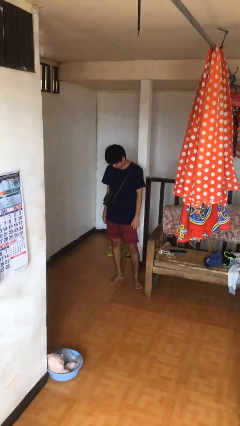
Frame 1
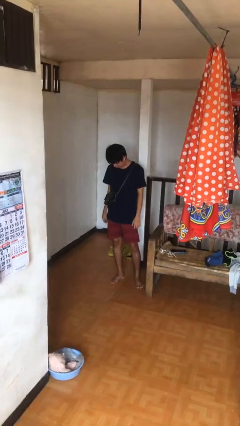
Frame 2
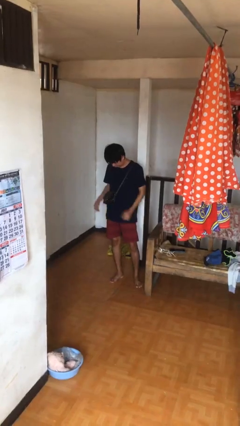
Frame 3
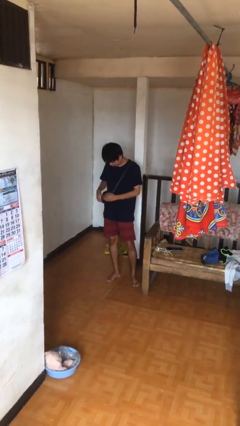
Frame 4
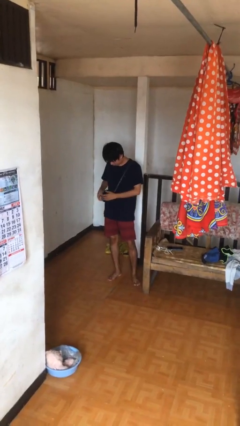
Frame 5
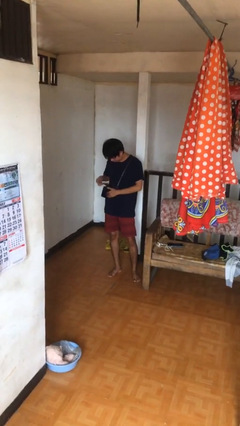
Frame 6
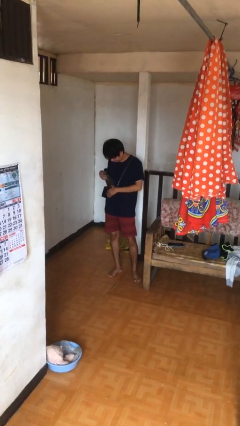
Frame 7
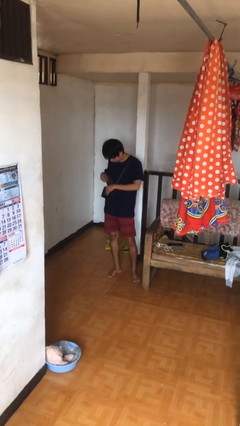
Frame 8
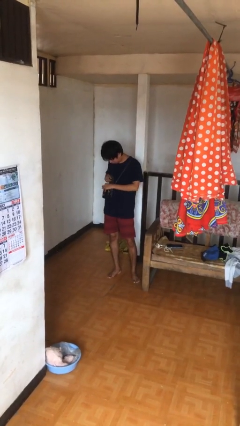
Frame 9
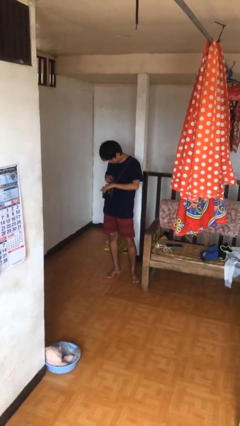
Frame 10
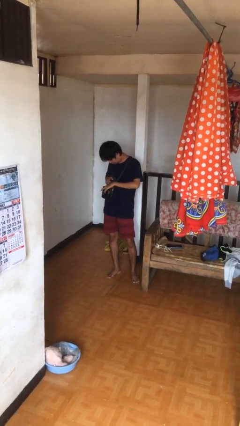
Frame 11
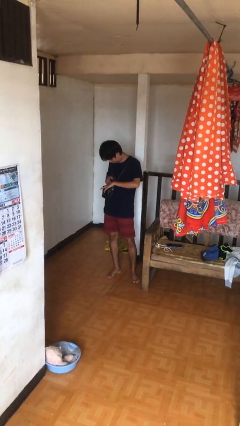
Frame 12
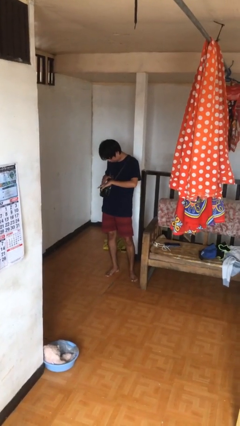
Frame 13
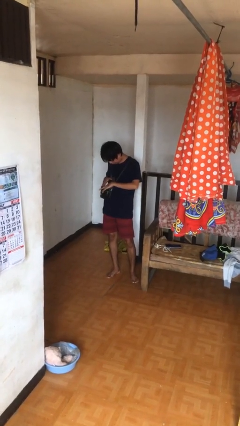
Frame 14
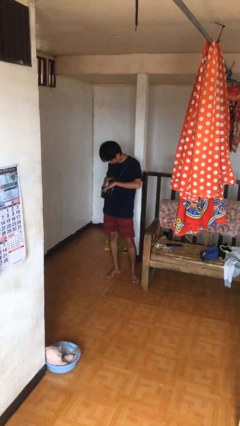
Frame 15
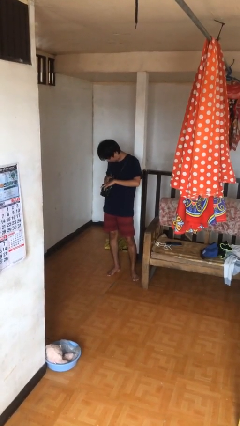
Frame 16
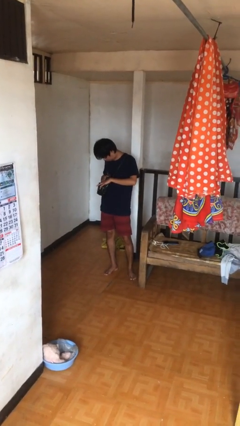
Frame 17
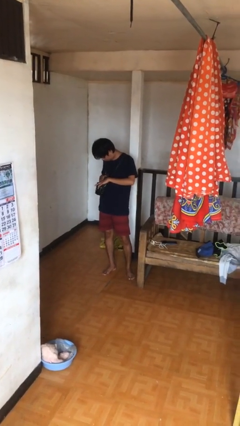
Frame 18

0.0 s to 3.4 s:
person searches in purse

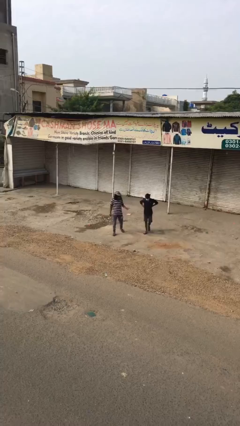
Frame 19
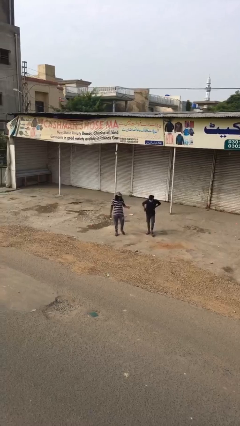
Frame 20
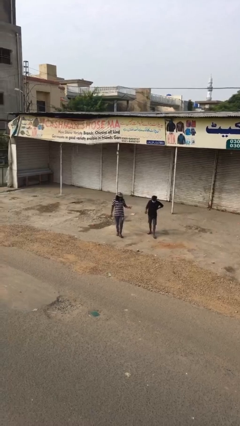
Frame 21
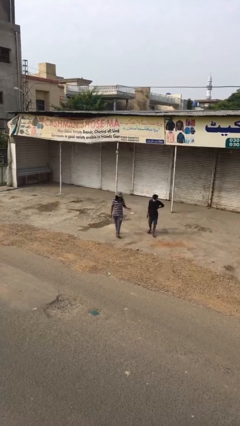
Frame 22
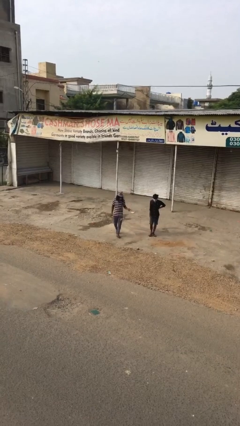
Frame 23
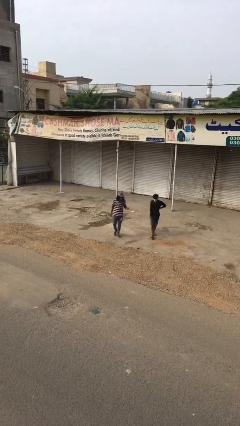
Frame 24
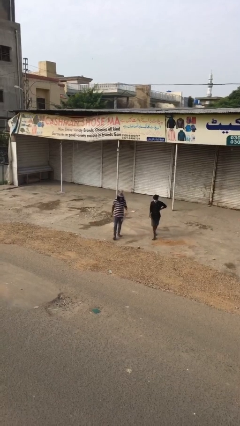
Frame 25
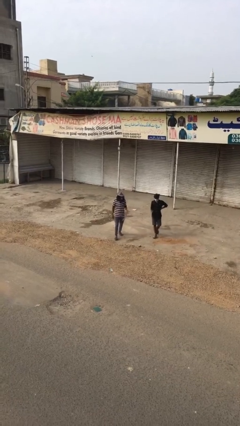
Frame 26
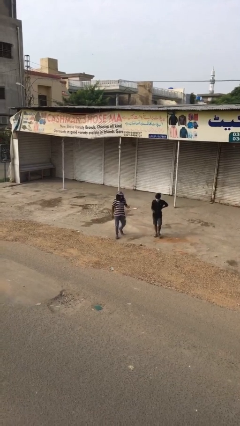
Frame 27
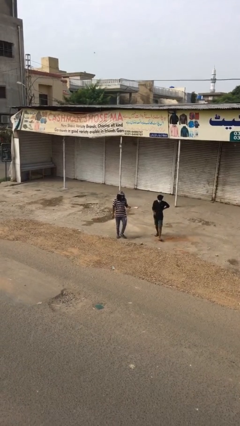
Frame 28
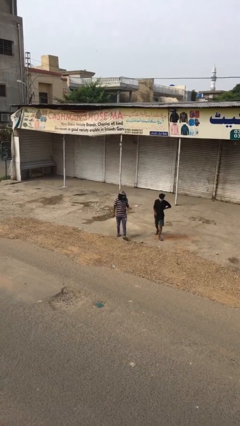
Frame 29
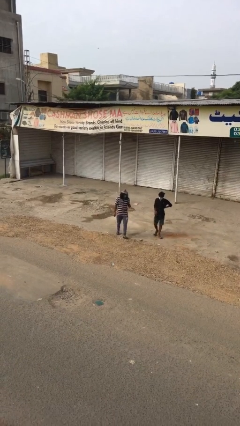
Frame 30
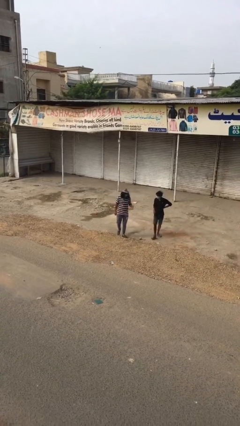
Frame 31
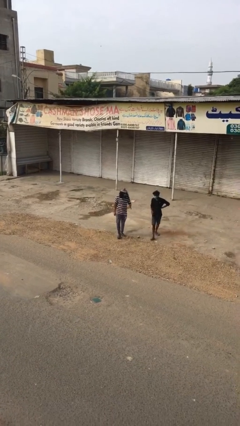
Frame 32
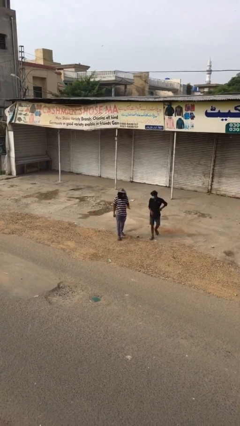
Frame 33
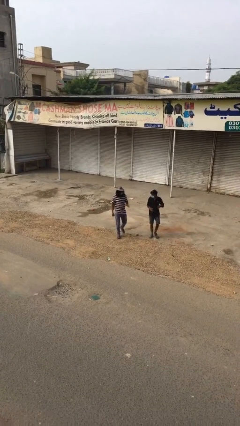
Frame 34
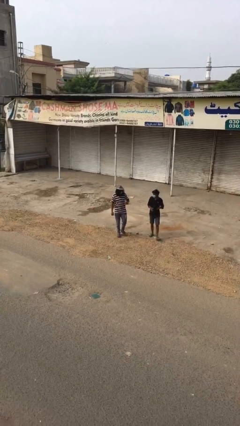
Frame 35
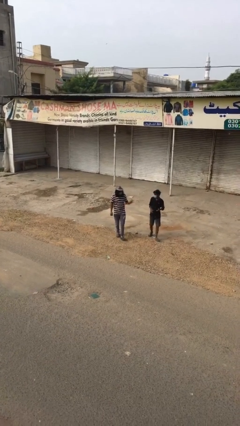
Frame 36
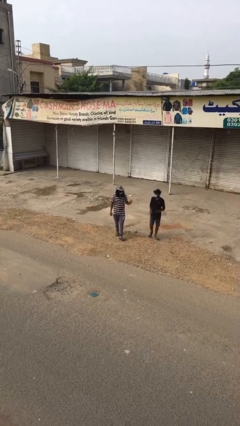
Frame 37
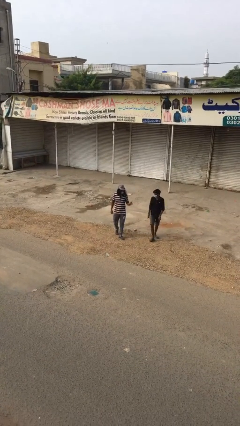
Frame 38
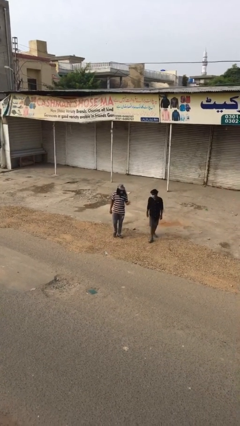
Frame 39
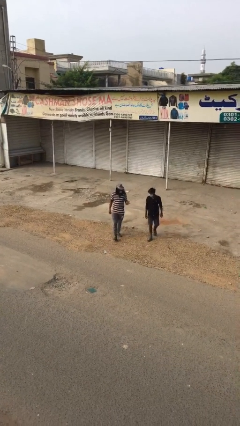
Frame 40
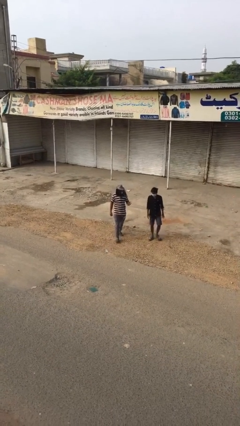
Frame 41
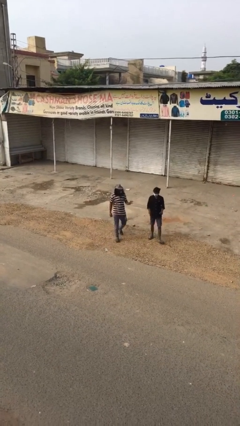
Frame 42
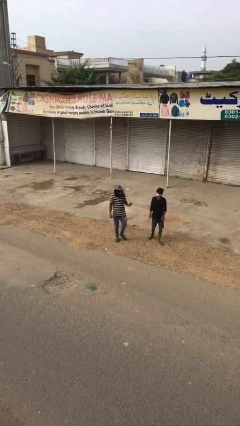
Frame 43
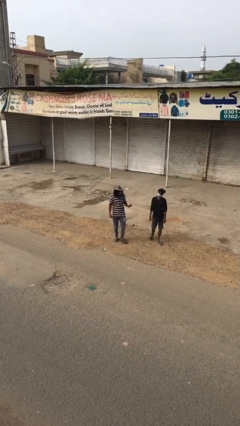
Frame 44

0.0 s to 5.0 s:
person talks to person

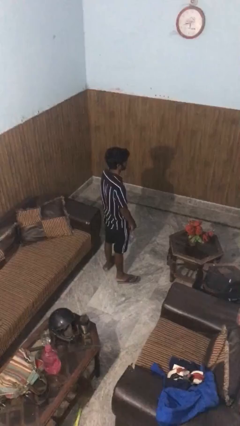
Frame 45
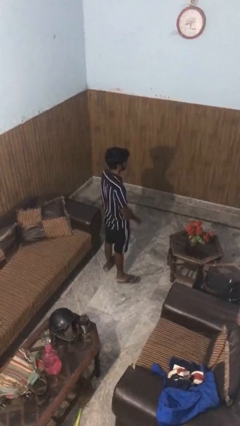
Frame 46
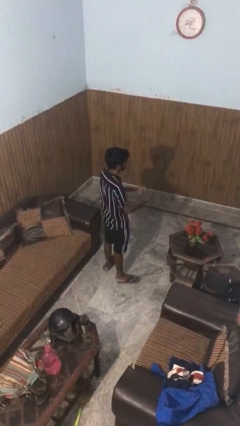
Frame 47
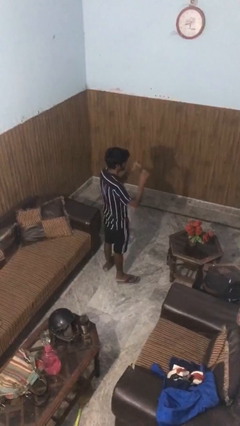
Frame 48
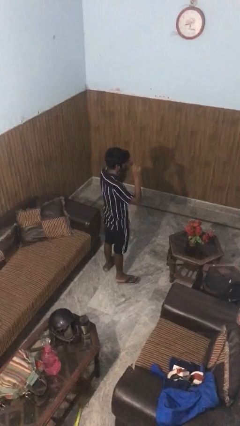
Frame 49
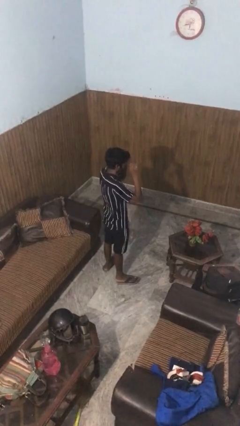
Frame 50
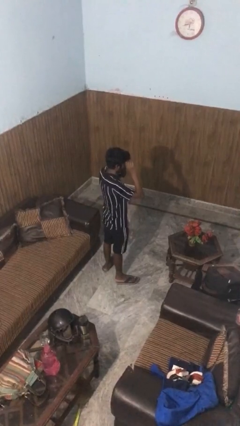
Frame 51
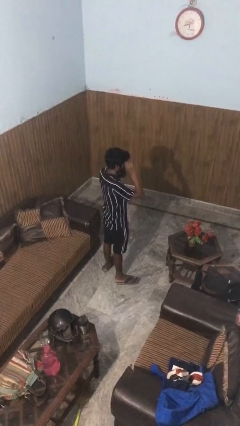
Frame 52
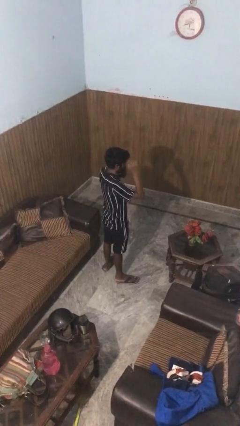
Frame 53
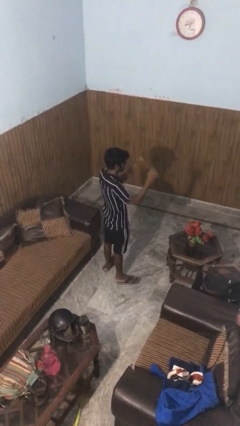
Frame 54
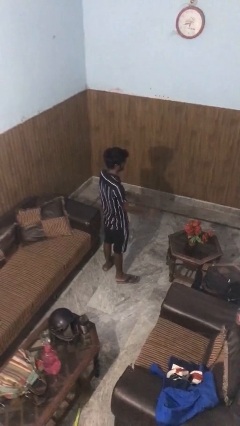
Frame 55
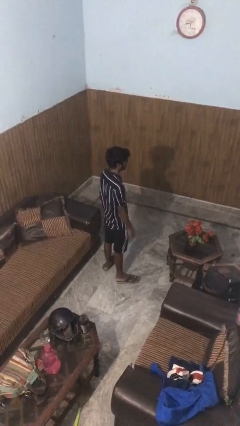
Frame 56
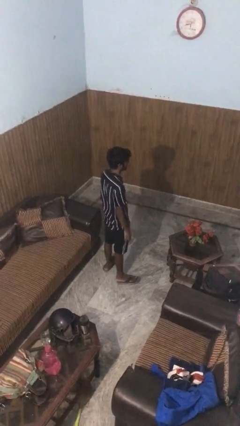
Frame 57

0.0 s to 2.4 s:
person puts on glasses

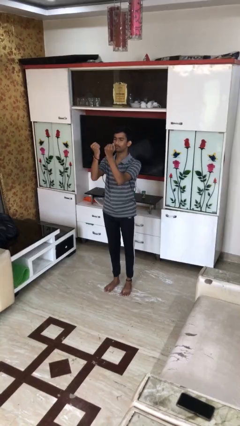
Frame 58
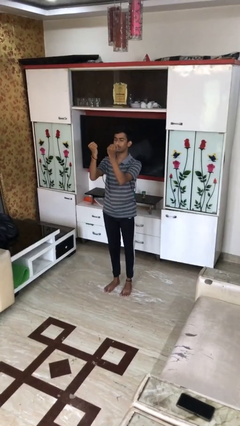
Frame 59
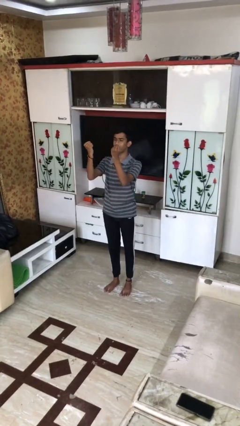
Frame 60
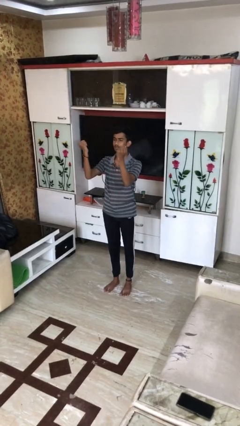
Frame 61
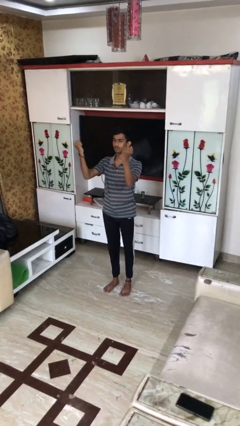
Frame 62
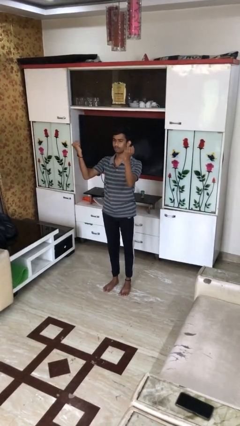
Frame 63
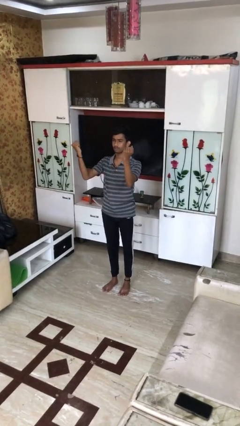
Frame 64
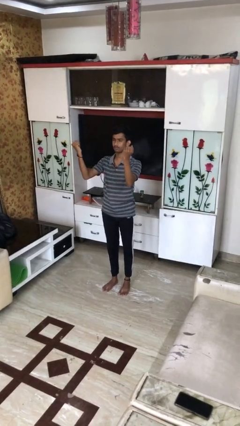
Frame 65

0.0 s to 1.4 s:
person gestures zoom in

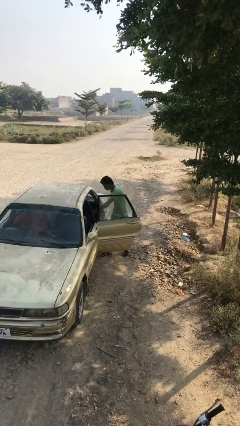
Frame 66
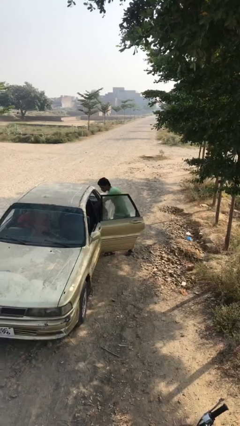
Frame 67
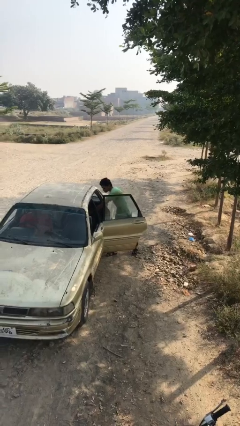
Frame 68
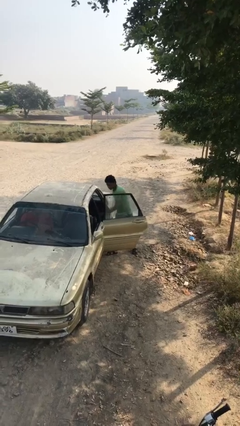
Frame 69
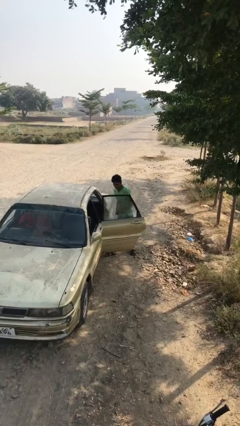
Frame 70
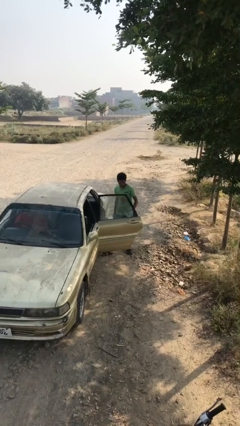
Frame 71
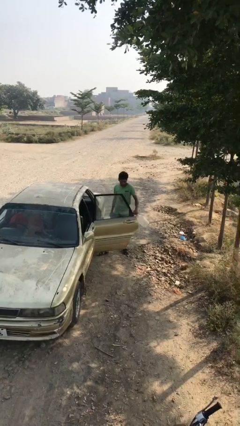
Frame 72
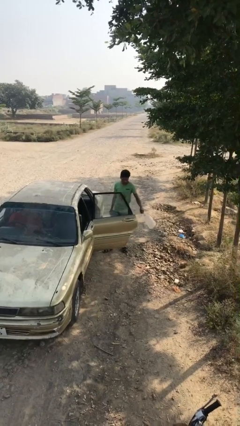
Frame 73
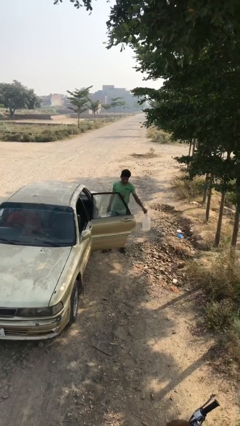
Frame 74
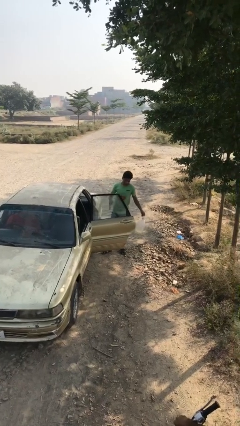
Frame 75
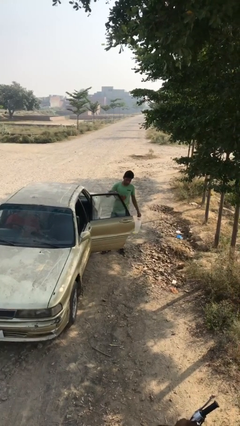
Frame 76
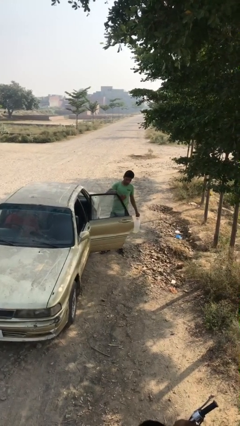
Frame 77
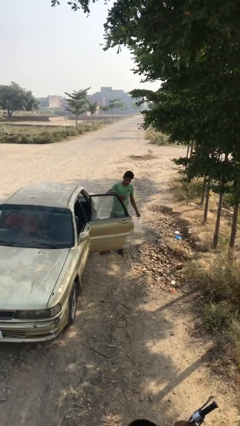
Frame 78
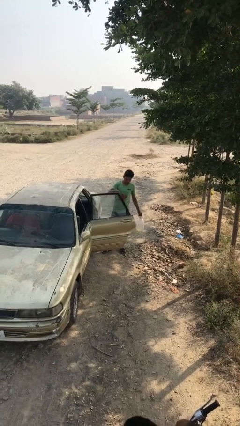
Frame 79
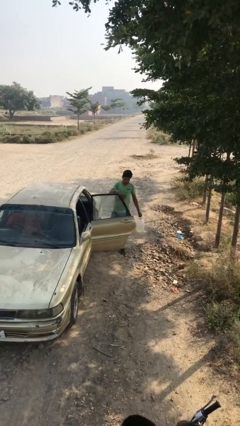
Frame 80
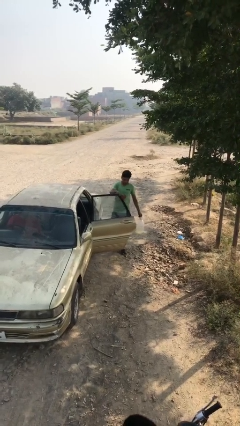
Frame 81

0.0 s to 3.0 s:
person unloads car

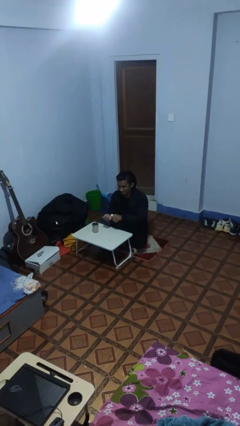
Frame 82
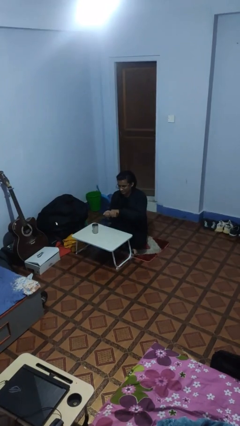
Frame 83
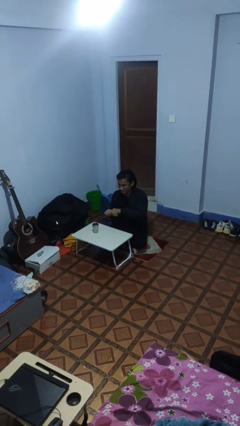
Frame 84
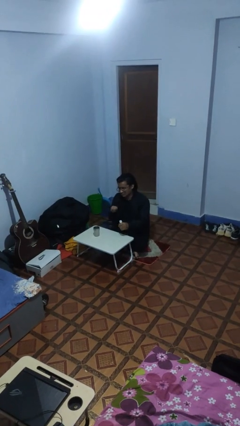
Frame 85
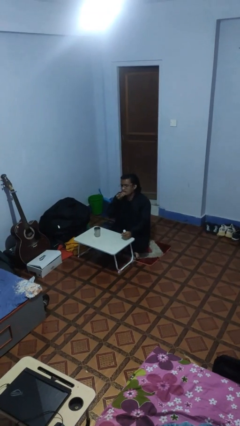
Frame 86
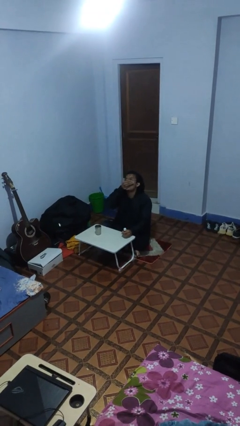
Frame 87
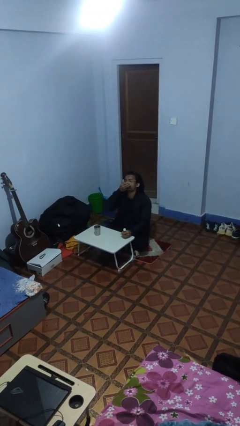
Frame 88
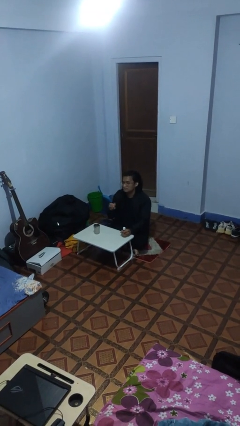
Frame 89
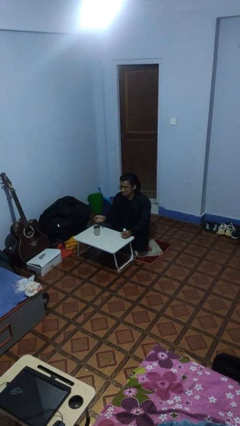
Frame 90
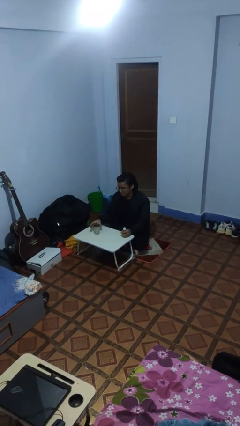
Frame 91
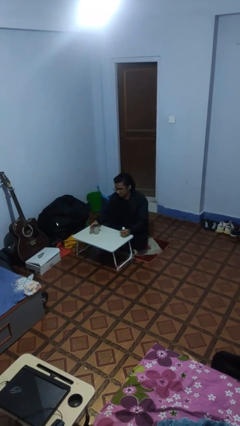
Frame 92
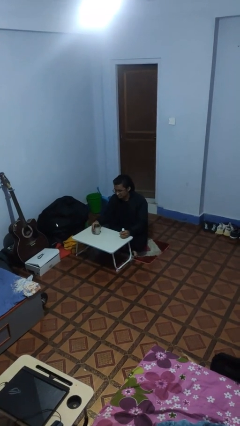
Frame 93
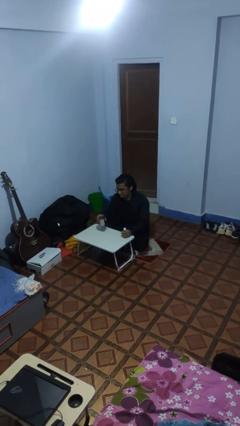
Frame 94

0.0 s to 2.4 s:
person takes medicine pills
